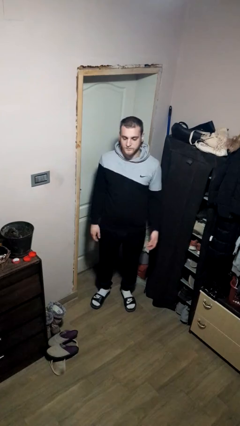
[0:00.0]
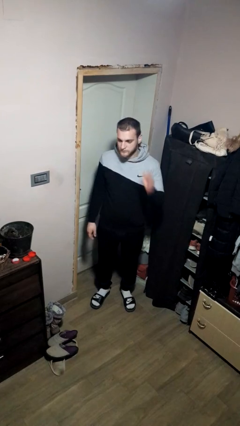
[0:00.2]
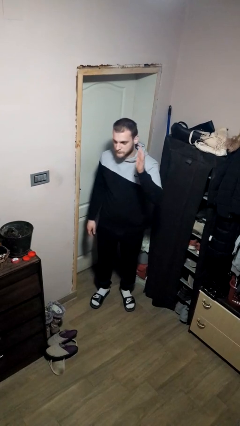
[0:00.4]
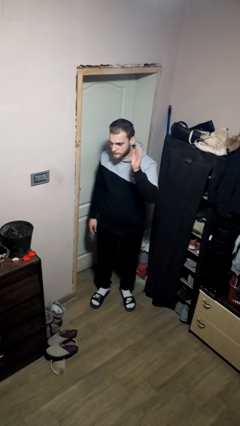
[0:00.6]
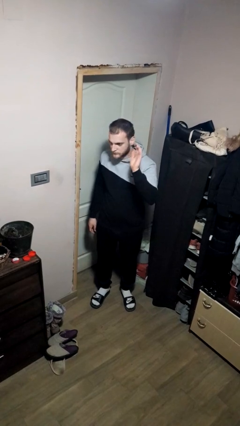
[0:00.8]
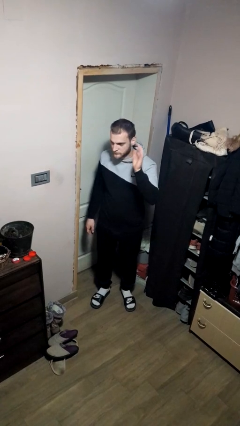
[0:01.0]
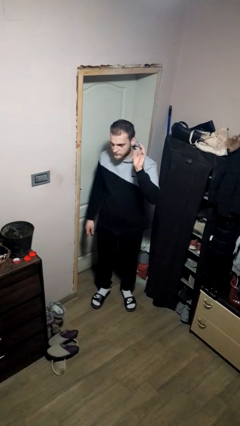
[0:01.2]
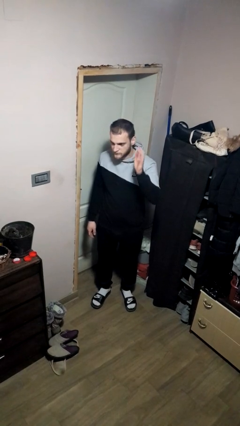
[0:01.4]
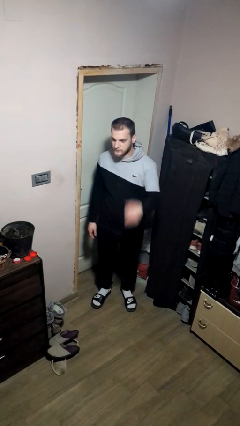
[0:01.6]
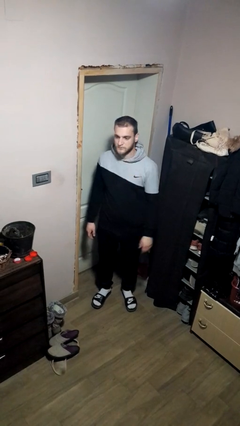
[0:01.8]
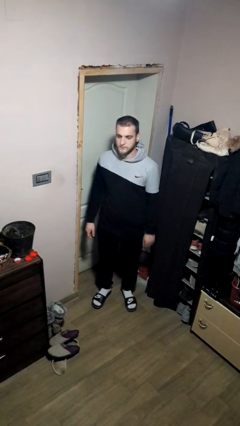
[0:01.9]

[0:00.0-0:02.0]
person waves at person

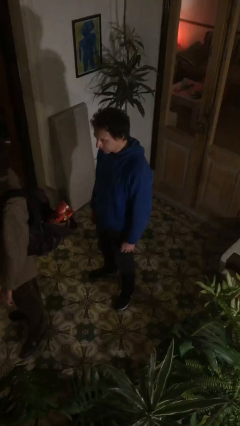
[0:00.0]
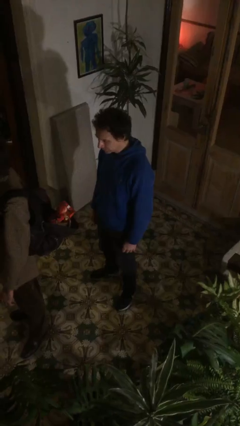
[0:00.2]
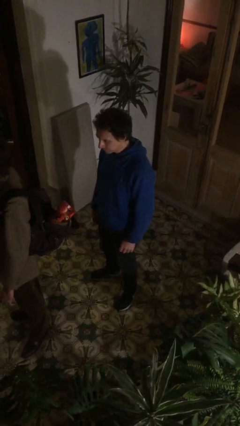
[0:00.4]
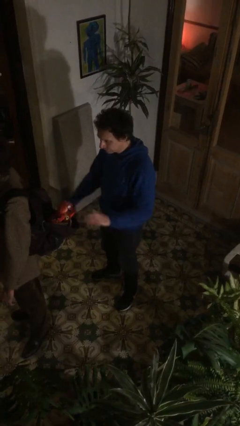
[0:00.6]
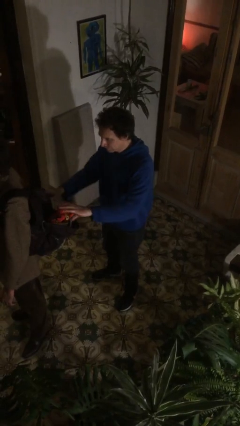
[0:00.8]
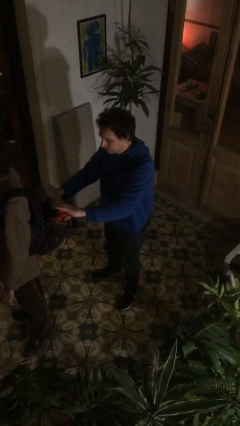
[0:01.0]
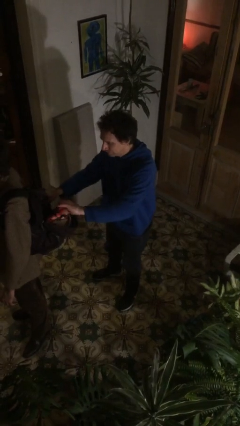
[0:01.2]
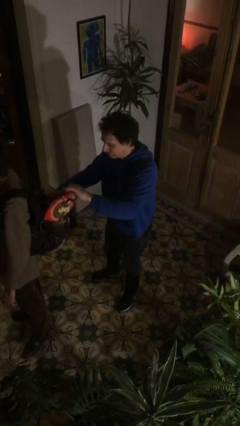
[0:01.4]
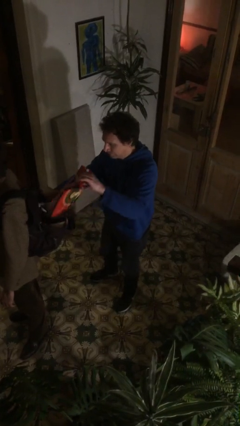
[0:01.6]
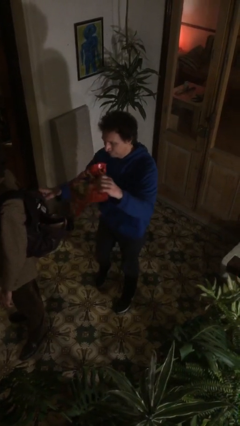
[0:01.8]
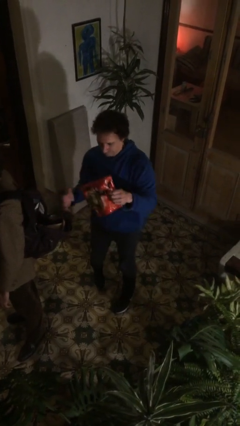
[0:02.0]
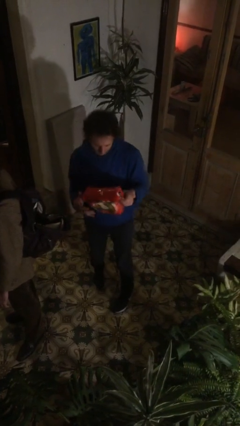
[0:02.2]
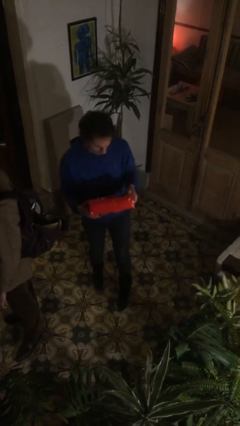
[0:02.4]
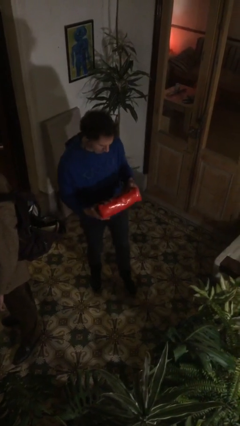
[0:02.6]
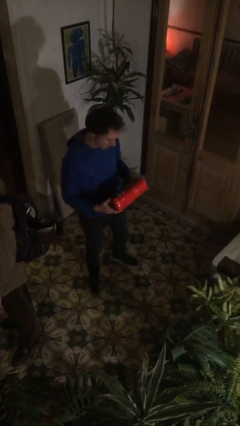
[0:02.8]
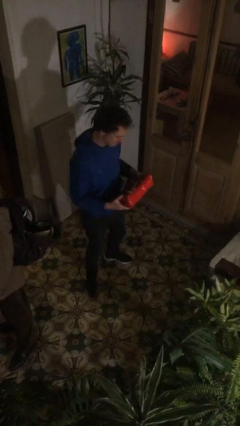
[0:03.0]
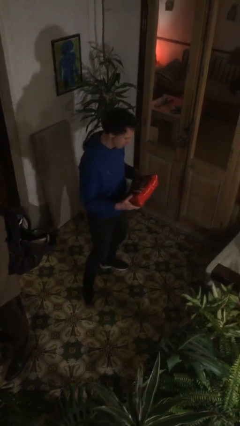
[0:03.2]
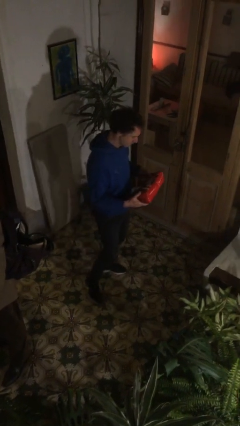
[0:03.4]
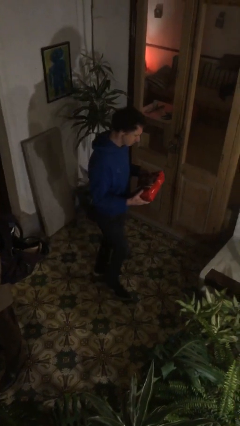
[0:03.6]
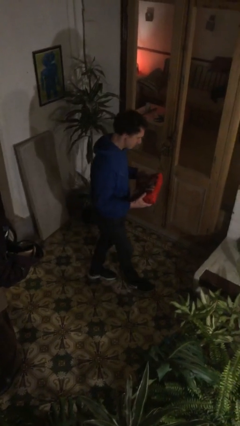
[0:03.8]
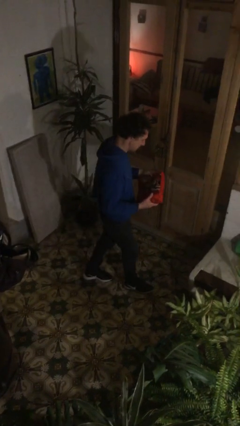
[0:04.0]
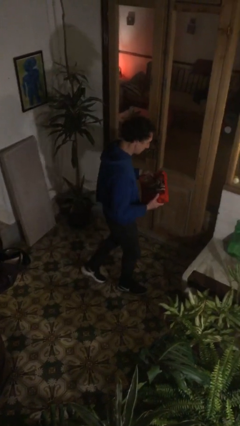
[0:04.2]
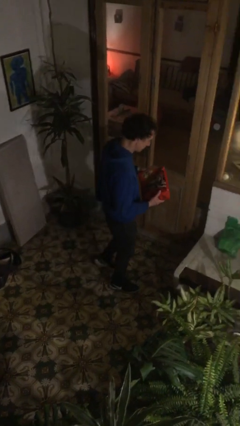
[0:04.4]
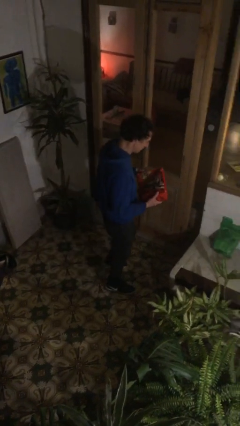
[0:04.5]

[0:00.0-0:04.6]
person steals object from person

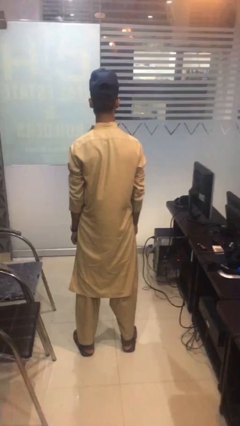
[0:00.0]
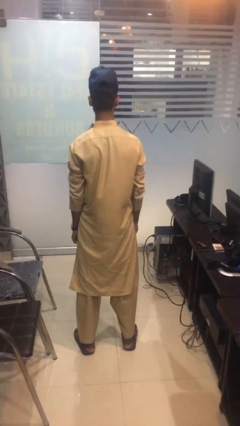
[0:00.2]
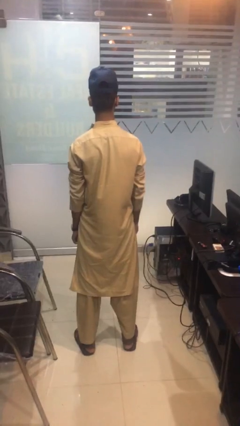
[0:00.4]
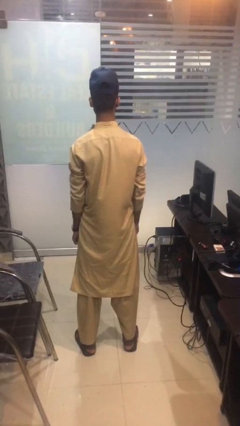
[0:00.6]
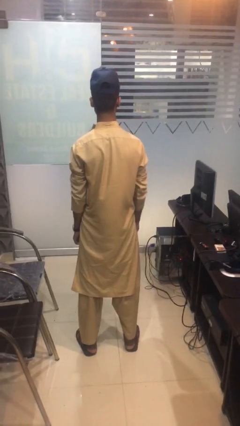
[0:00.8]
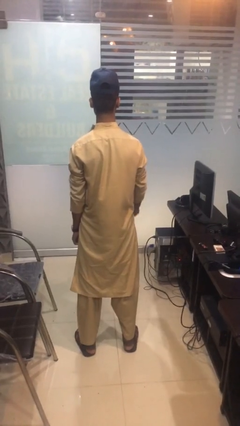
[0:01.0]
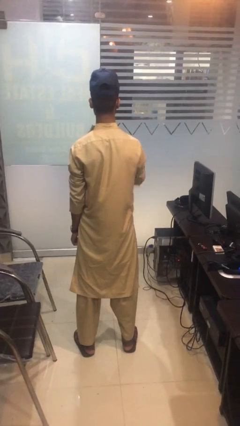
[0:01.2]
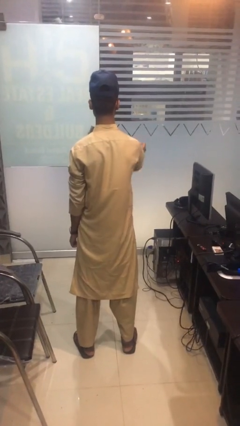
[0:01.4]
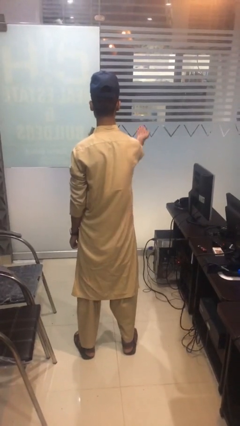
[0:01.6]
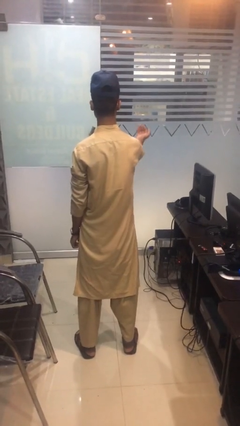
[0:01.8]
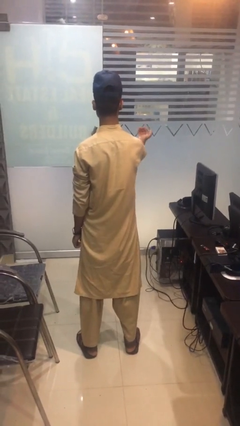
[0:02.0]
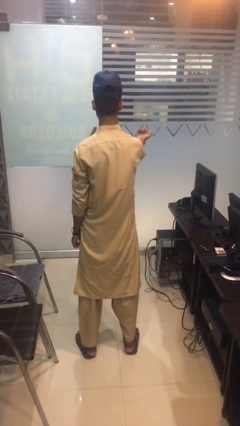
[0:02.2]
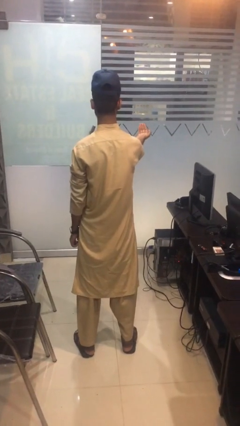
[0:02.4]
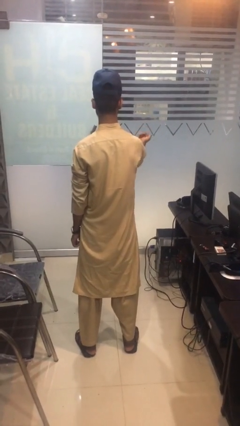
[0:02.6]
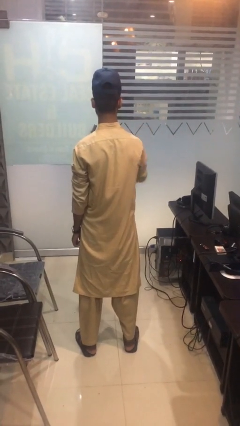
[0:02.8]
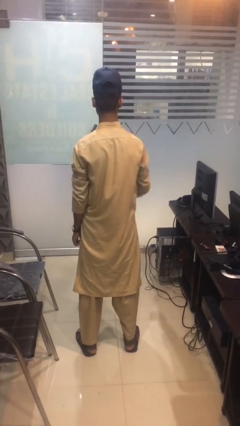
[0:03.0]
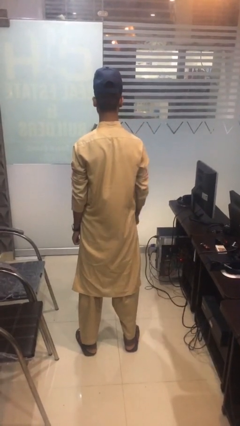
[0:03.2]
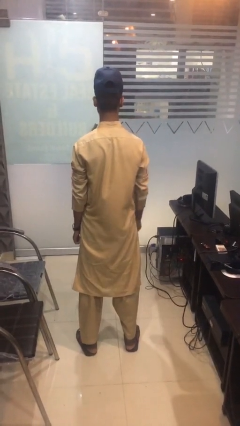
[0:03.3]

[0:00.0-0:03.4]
person gestures come here

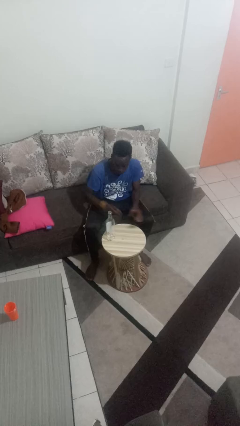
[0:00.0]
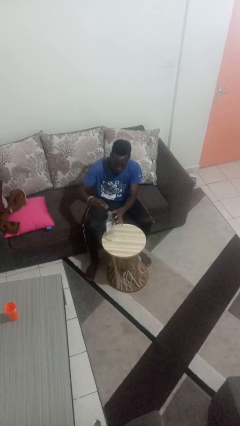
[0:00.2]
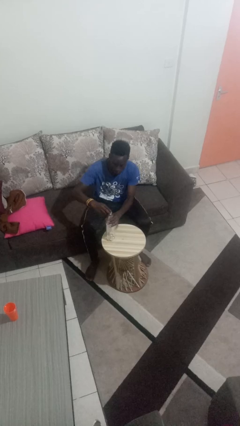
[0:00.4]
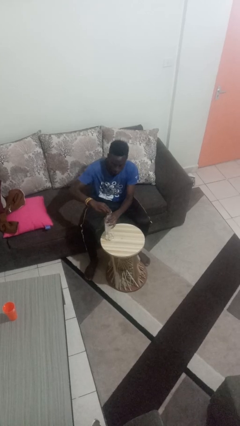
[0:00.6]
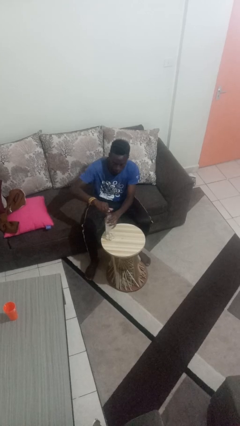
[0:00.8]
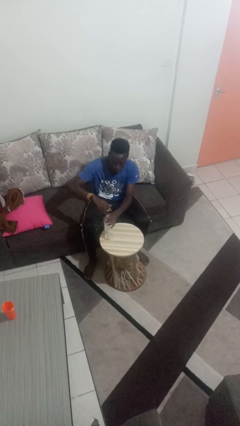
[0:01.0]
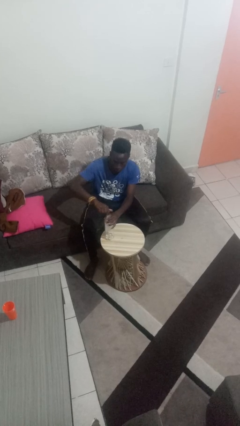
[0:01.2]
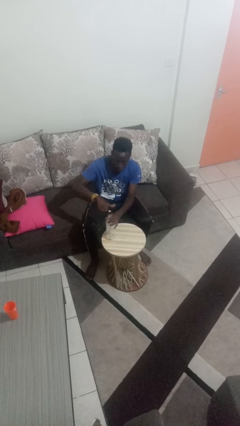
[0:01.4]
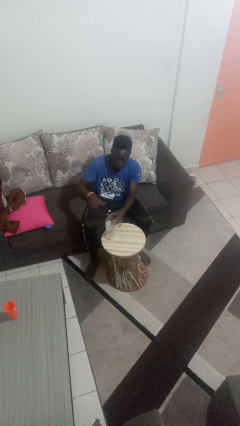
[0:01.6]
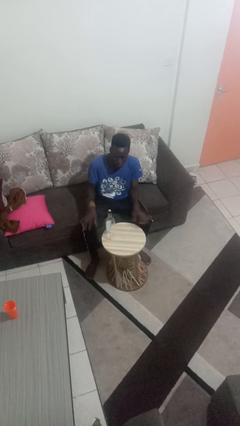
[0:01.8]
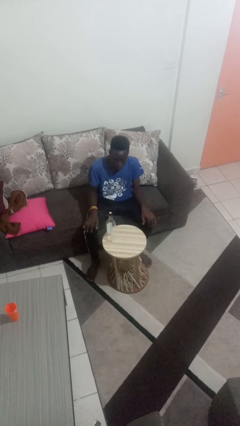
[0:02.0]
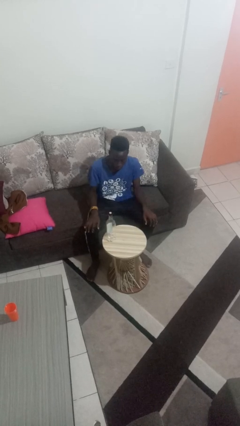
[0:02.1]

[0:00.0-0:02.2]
person screws lid to bottle

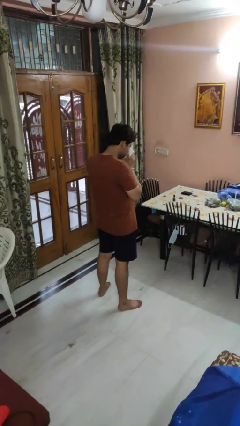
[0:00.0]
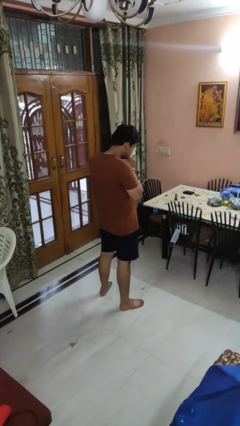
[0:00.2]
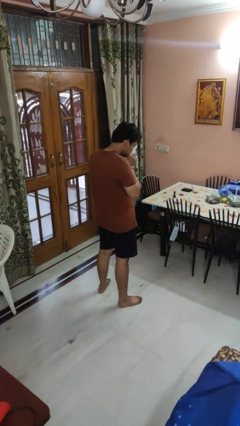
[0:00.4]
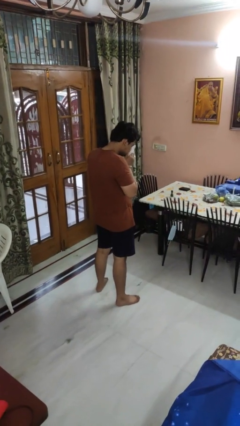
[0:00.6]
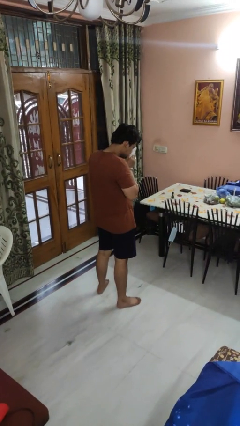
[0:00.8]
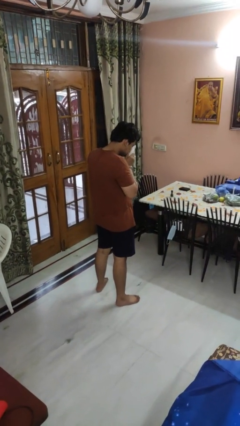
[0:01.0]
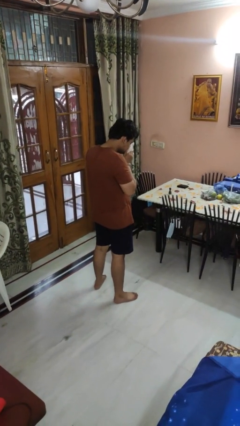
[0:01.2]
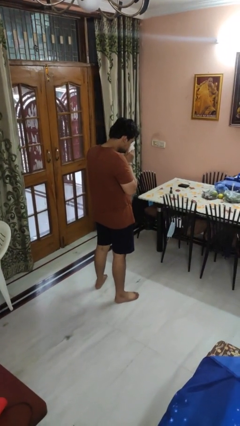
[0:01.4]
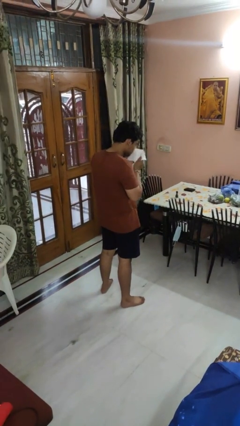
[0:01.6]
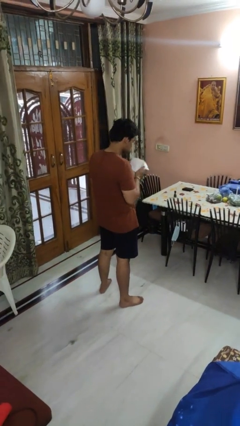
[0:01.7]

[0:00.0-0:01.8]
person blows nose

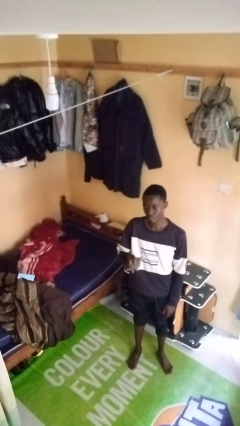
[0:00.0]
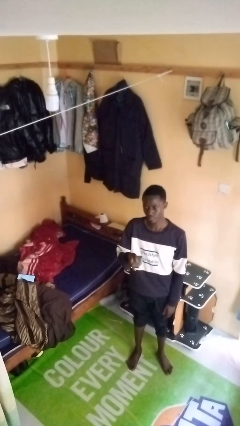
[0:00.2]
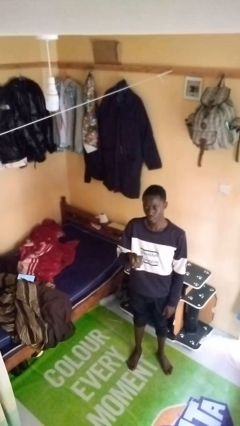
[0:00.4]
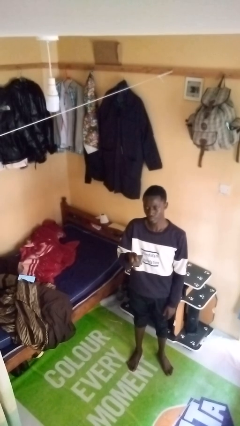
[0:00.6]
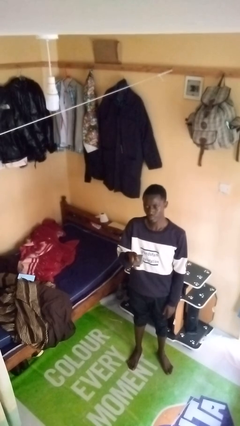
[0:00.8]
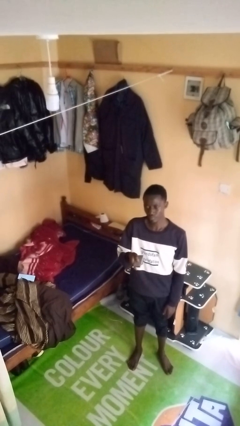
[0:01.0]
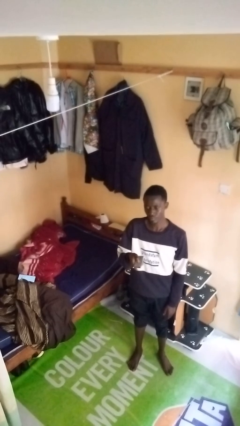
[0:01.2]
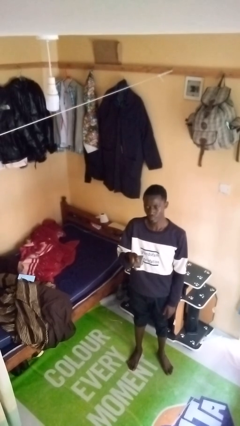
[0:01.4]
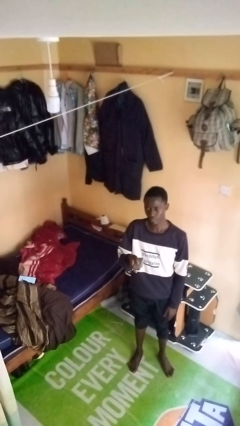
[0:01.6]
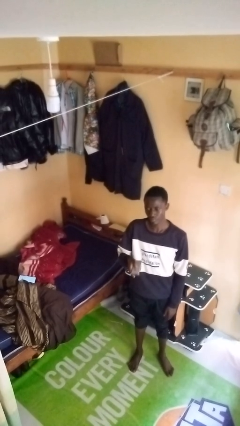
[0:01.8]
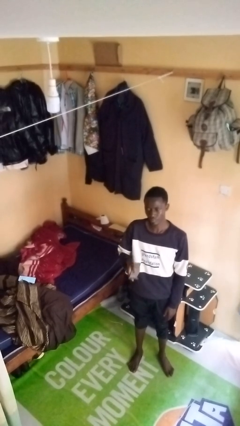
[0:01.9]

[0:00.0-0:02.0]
person uses television remote

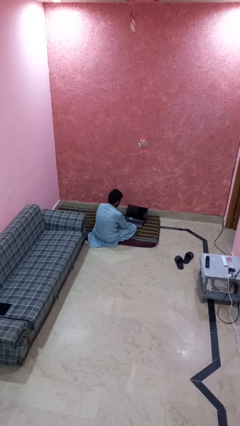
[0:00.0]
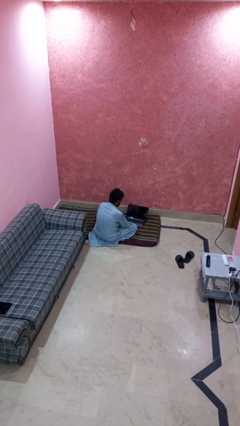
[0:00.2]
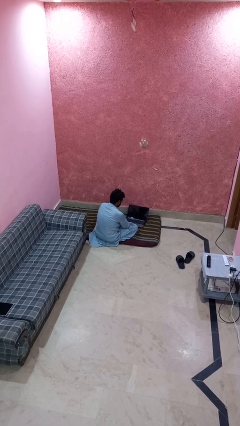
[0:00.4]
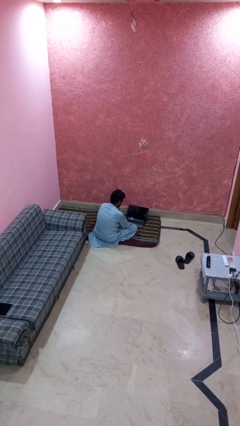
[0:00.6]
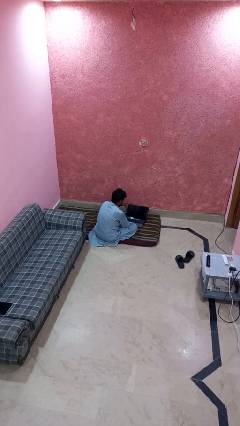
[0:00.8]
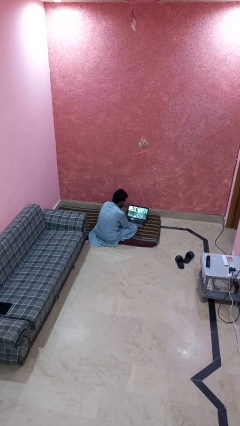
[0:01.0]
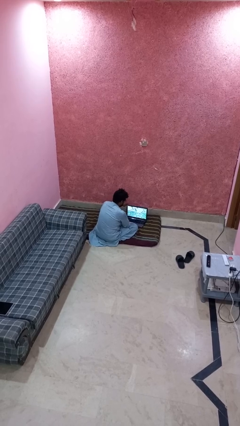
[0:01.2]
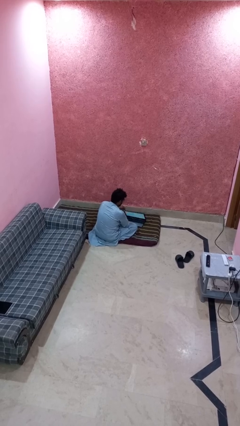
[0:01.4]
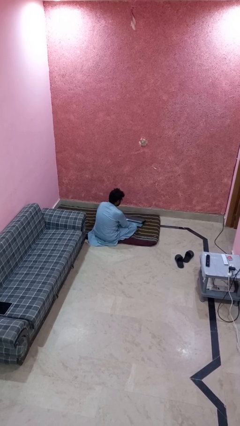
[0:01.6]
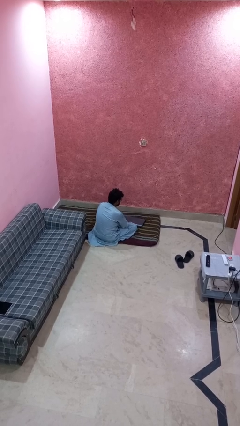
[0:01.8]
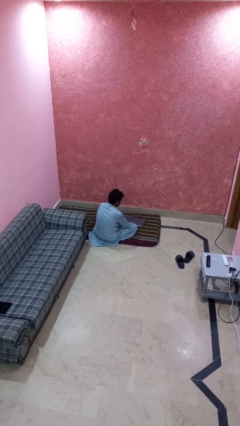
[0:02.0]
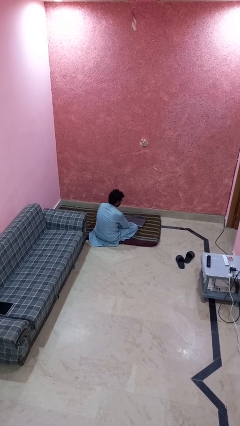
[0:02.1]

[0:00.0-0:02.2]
person closes laptop
